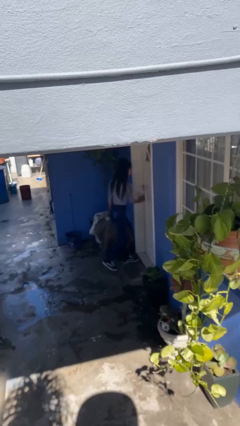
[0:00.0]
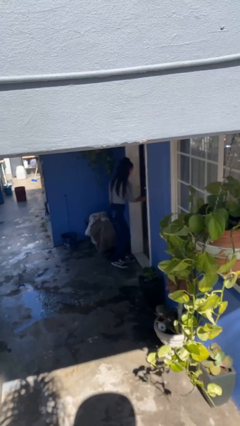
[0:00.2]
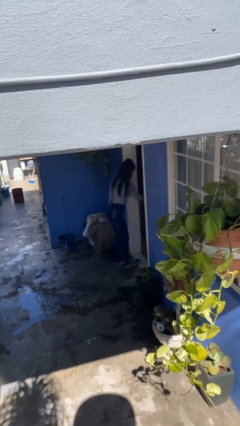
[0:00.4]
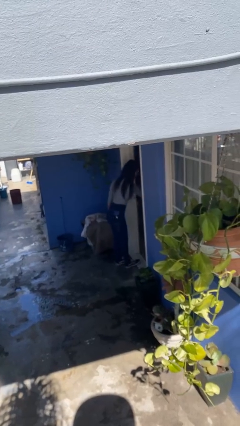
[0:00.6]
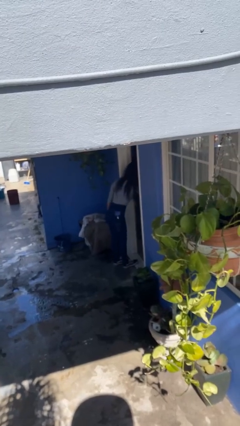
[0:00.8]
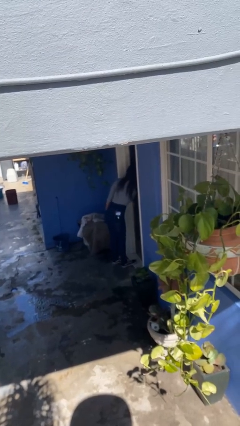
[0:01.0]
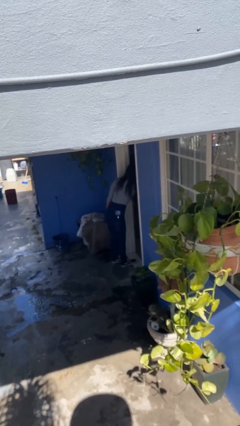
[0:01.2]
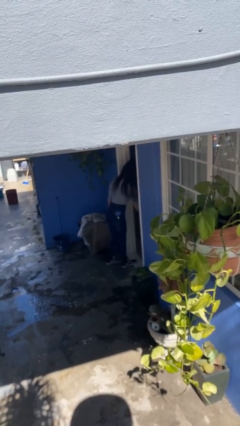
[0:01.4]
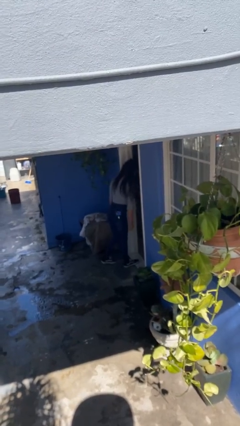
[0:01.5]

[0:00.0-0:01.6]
person opens facility door

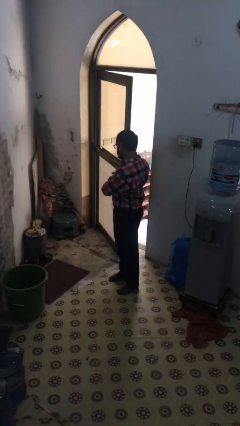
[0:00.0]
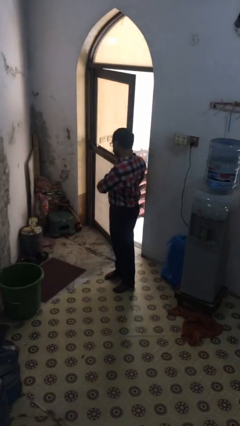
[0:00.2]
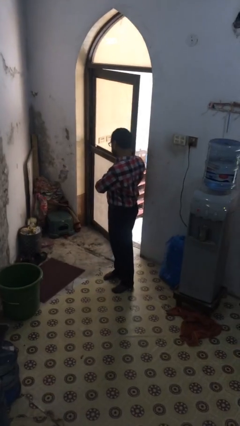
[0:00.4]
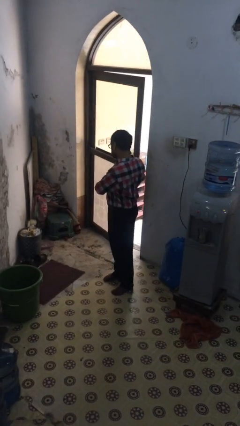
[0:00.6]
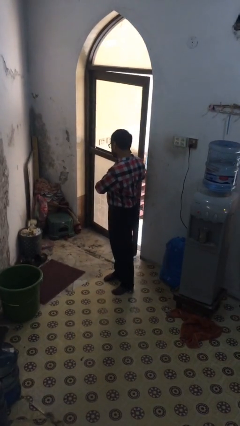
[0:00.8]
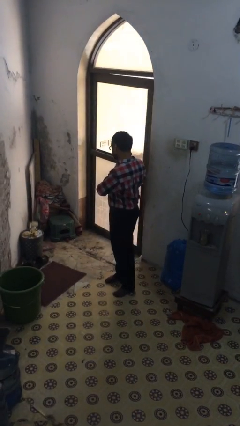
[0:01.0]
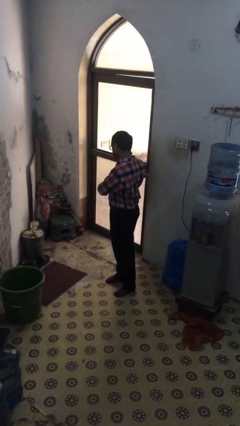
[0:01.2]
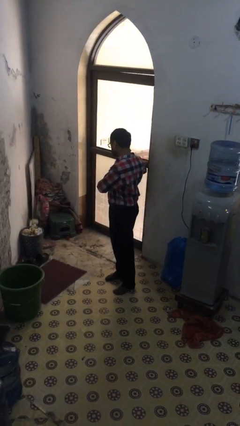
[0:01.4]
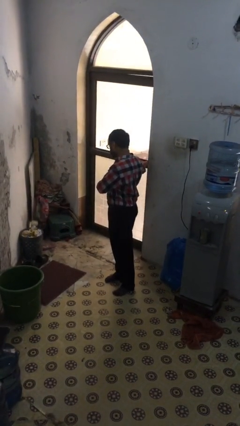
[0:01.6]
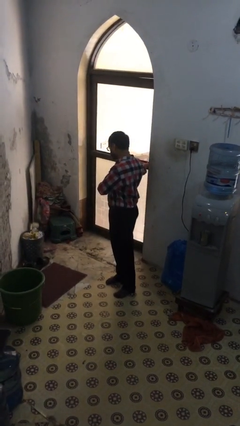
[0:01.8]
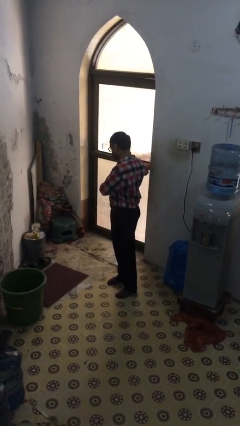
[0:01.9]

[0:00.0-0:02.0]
person closes facility door

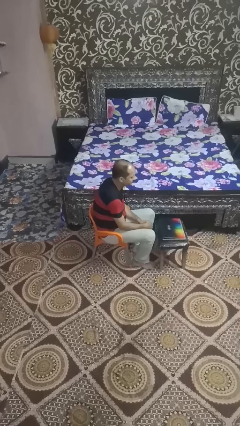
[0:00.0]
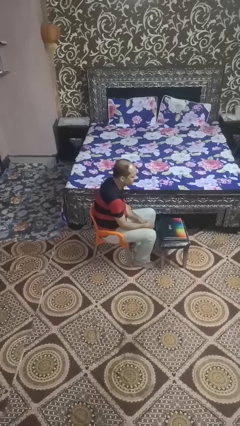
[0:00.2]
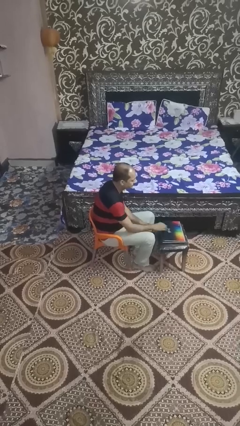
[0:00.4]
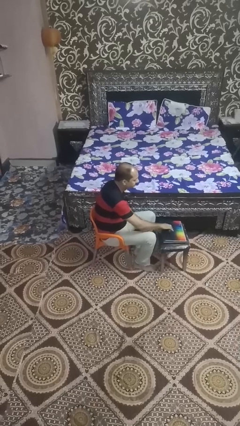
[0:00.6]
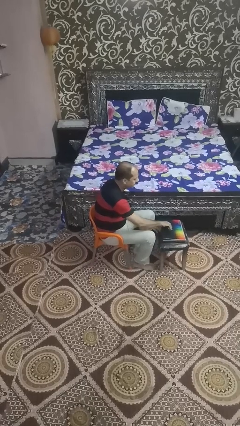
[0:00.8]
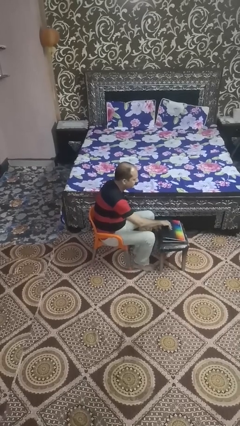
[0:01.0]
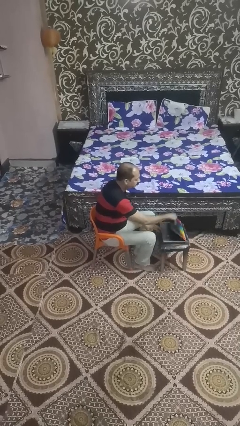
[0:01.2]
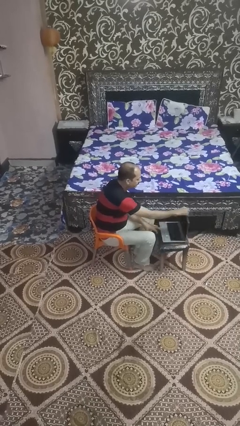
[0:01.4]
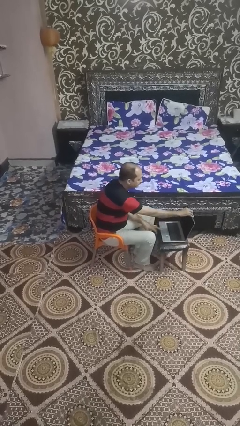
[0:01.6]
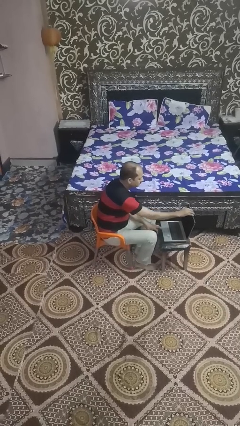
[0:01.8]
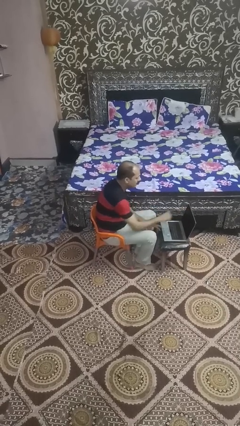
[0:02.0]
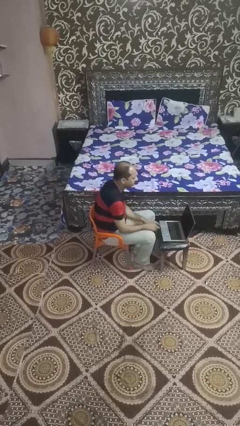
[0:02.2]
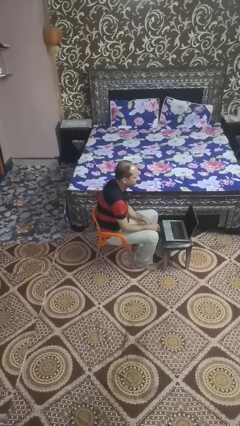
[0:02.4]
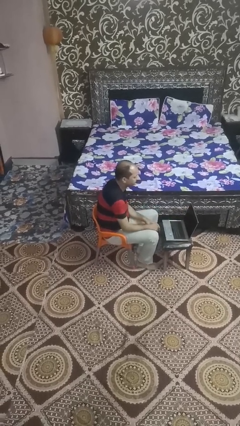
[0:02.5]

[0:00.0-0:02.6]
person opens laptop

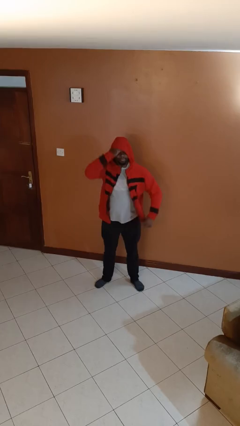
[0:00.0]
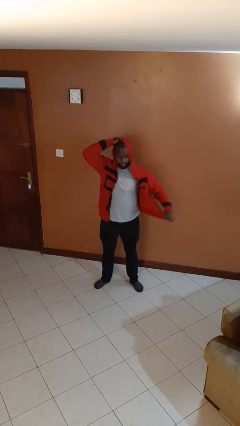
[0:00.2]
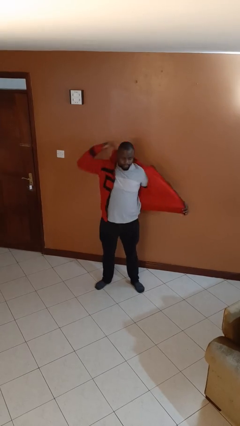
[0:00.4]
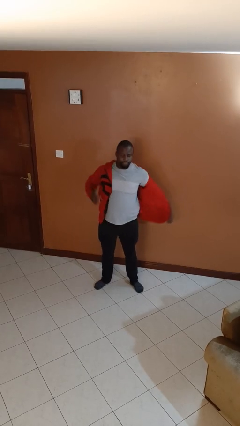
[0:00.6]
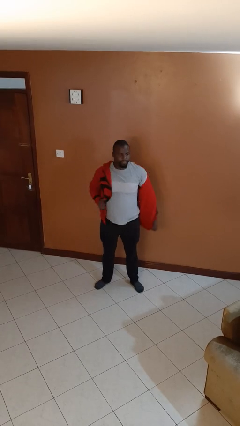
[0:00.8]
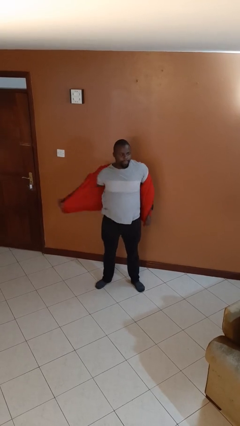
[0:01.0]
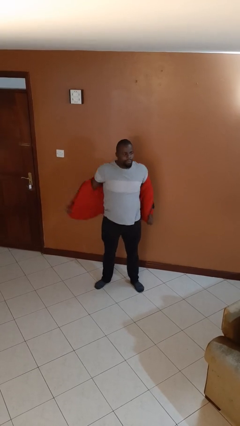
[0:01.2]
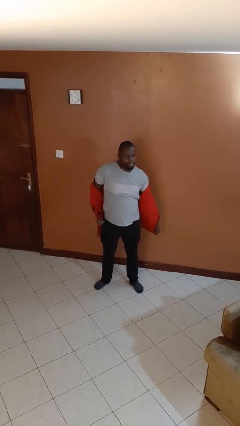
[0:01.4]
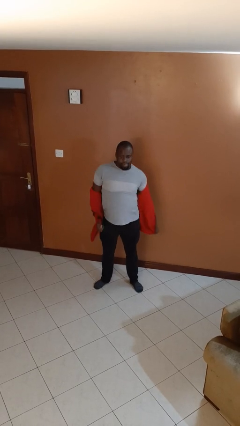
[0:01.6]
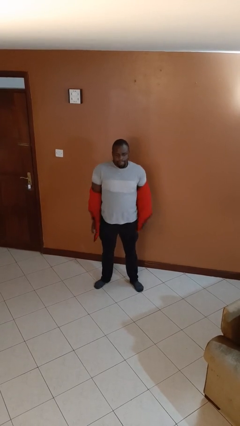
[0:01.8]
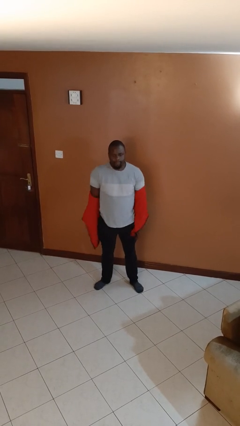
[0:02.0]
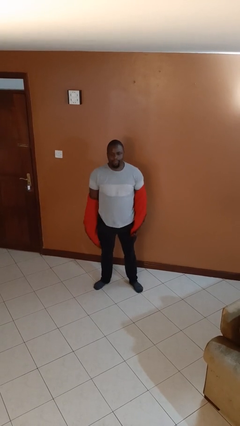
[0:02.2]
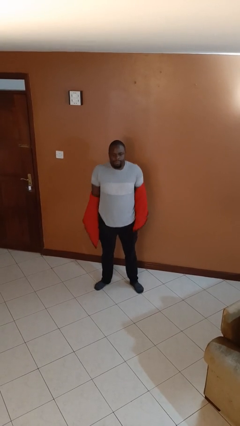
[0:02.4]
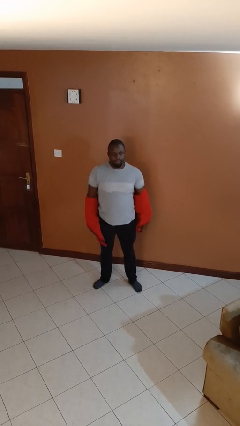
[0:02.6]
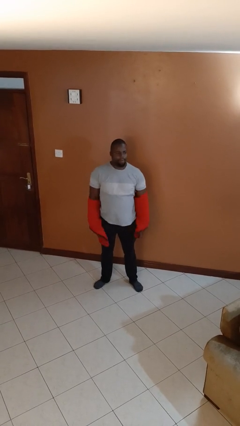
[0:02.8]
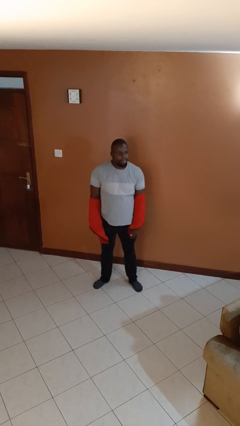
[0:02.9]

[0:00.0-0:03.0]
person takes off jacket

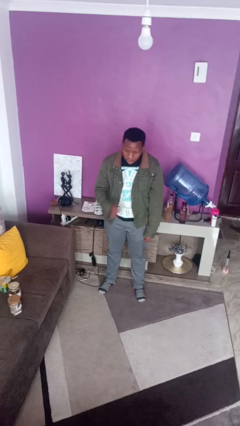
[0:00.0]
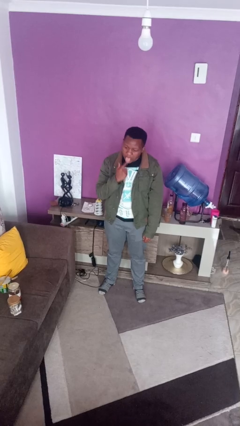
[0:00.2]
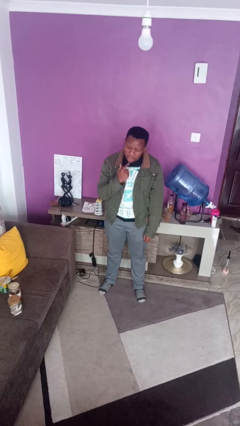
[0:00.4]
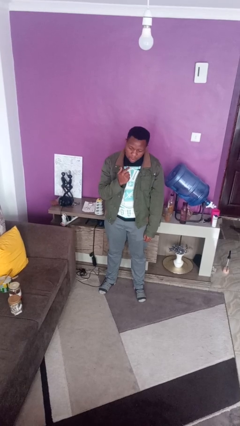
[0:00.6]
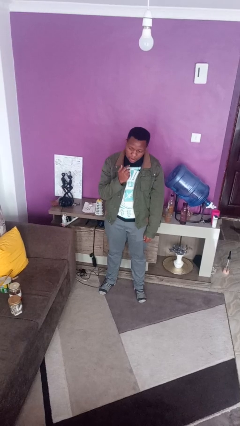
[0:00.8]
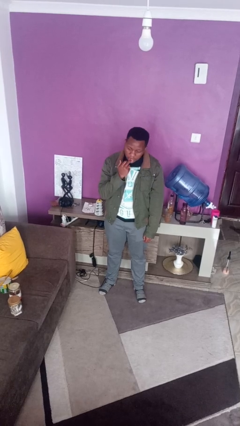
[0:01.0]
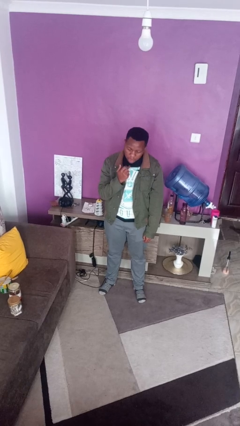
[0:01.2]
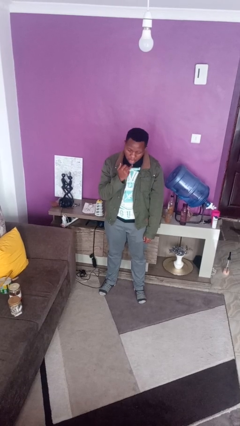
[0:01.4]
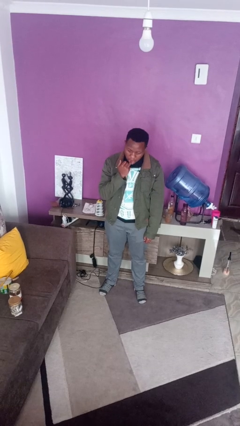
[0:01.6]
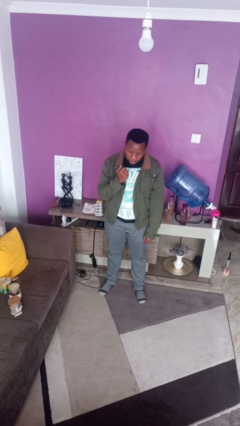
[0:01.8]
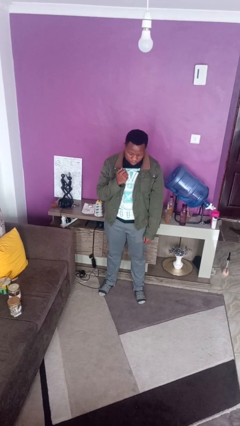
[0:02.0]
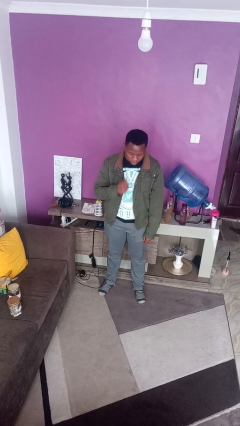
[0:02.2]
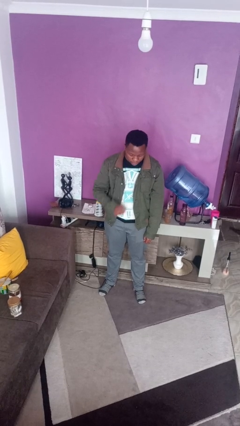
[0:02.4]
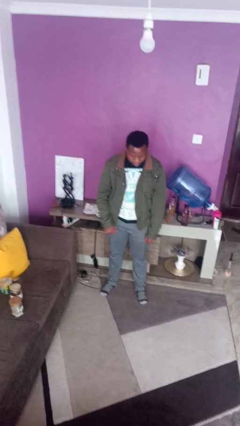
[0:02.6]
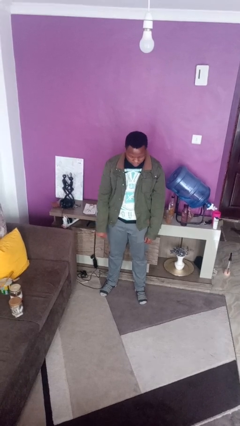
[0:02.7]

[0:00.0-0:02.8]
person licks fingers

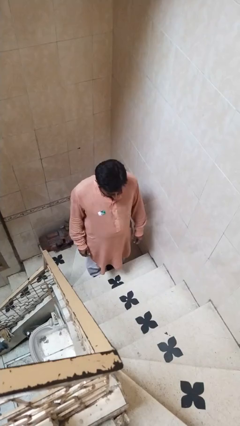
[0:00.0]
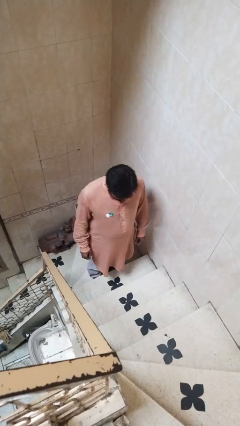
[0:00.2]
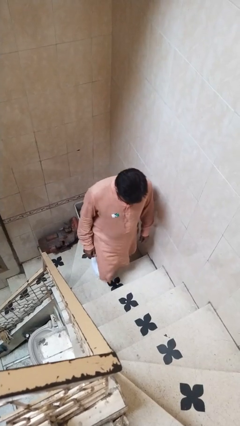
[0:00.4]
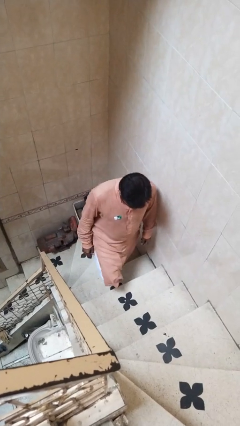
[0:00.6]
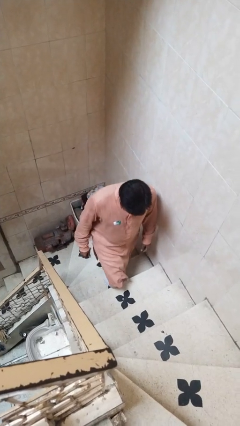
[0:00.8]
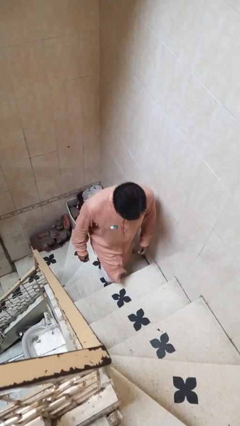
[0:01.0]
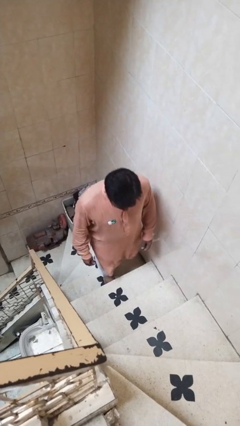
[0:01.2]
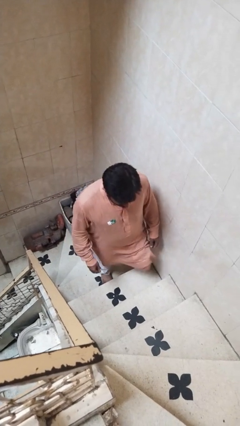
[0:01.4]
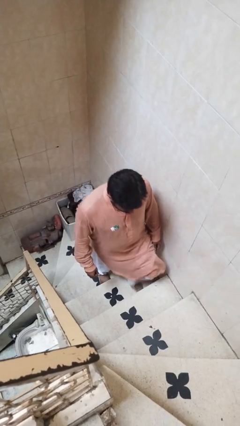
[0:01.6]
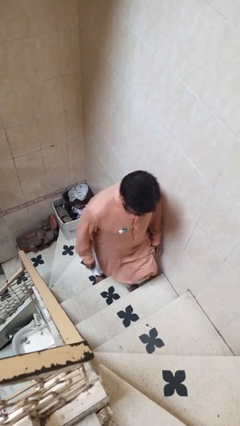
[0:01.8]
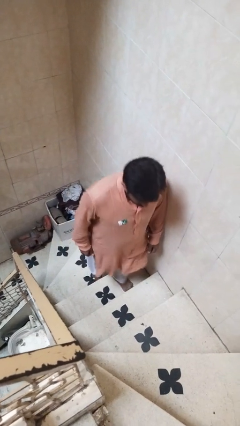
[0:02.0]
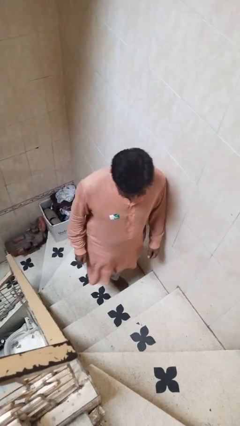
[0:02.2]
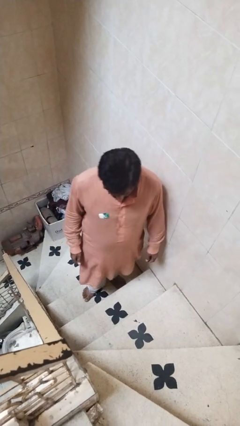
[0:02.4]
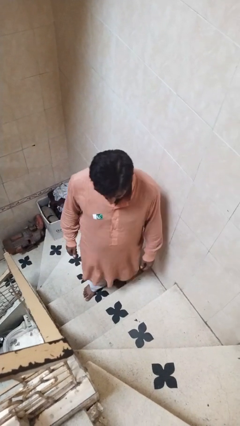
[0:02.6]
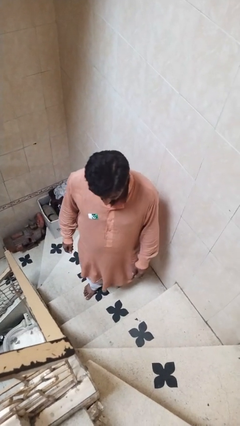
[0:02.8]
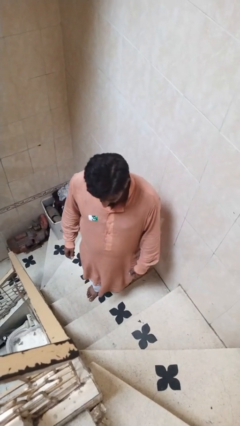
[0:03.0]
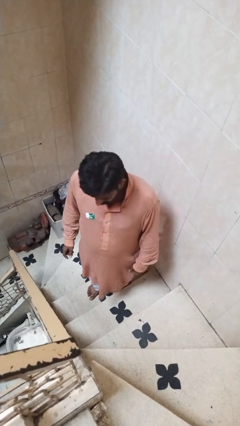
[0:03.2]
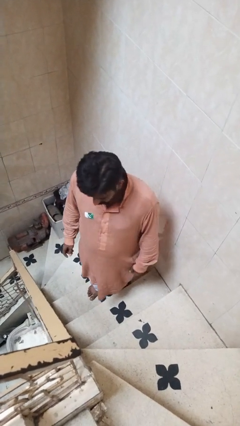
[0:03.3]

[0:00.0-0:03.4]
person climbs up stairs

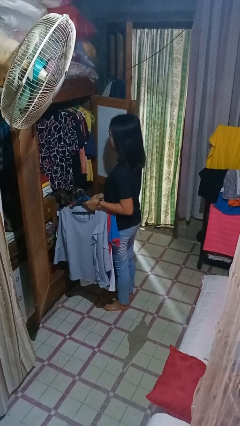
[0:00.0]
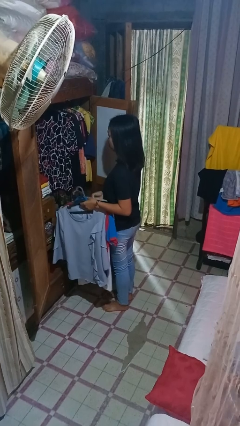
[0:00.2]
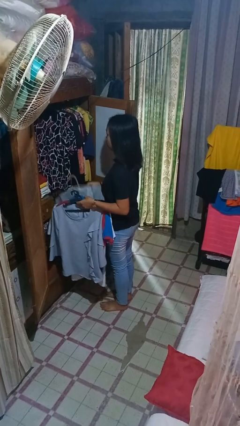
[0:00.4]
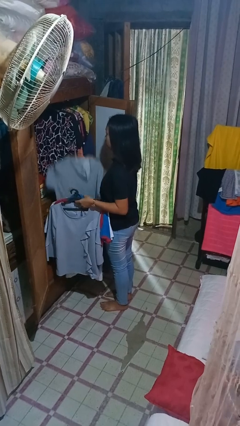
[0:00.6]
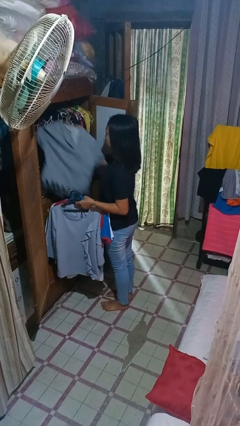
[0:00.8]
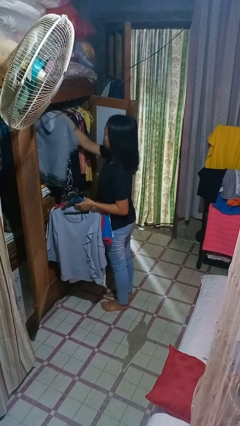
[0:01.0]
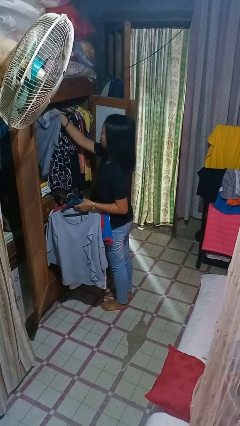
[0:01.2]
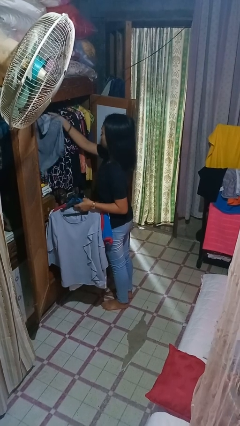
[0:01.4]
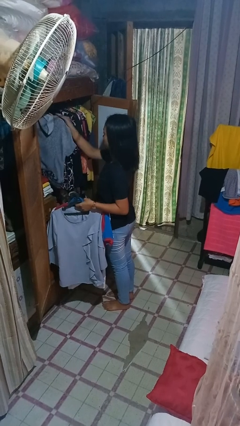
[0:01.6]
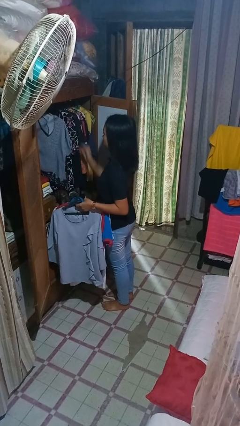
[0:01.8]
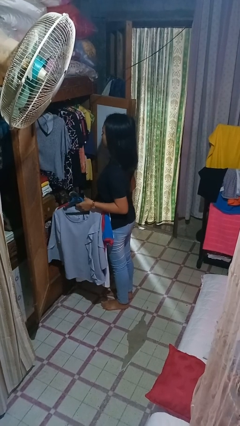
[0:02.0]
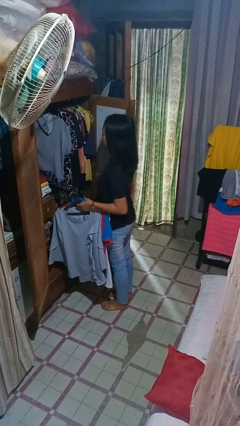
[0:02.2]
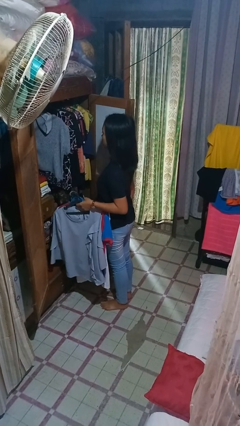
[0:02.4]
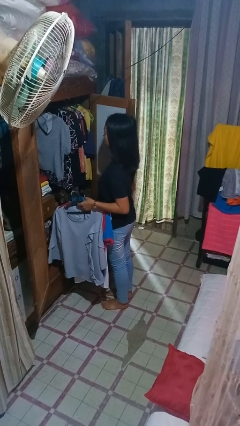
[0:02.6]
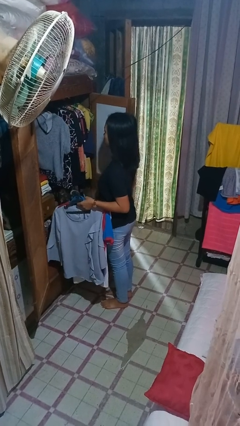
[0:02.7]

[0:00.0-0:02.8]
person puts clothes into closet
